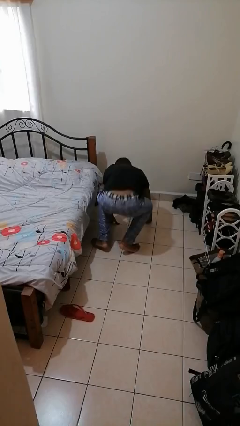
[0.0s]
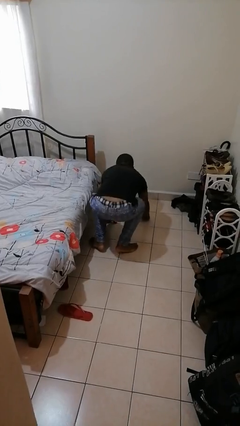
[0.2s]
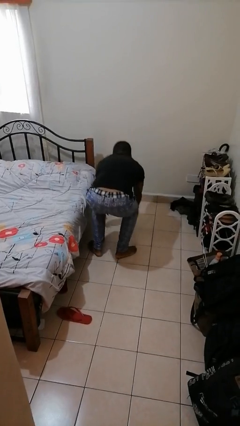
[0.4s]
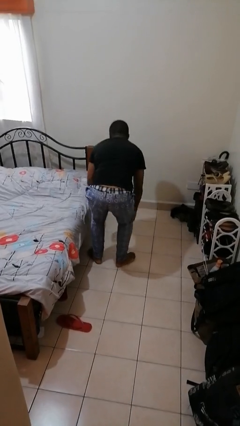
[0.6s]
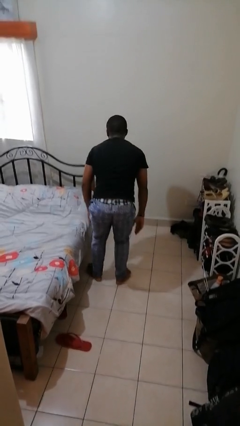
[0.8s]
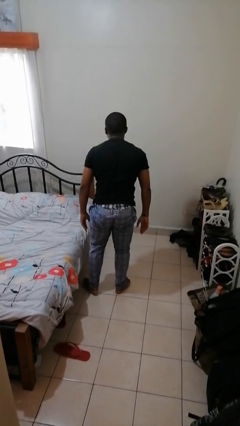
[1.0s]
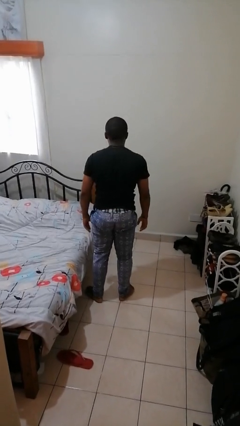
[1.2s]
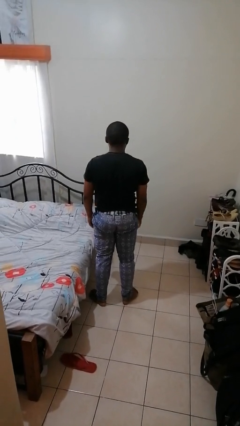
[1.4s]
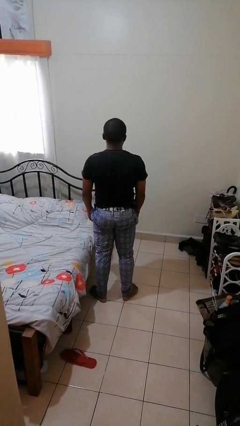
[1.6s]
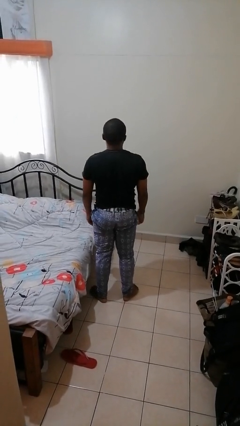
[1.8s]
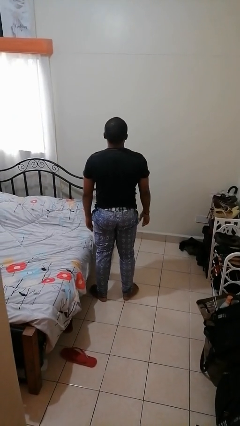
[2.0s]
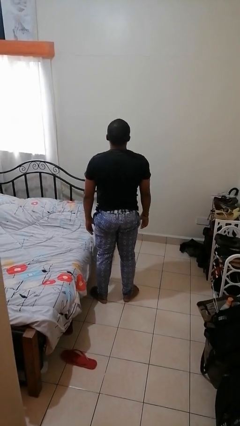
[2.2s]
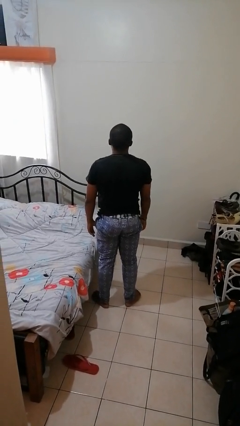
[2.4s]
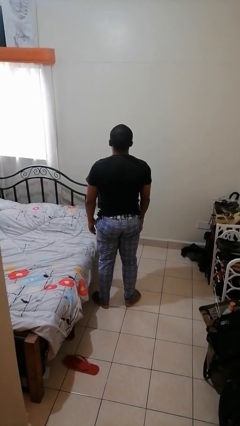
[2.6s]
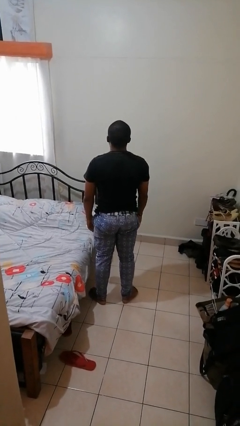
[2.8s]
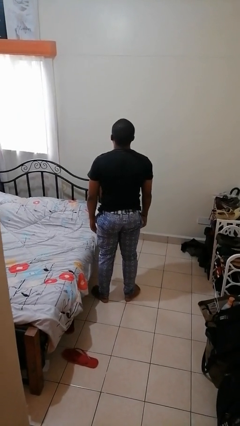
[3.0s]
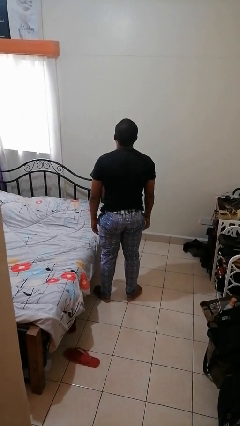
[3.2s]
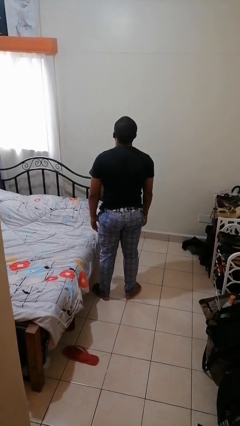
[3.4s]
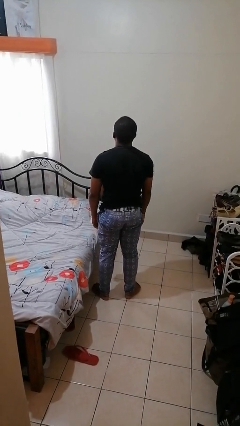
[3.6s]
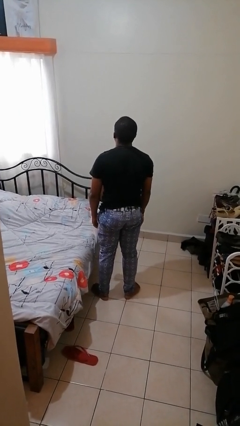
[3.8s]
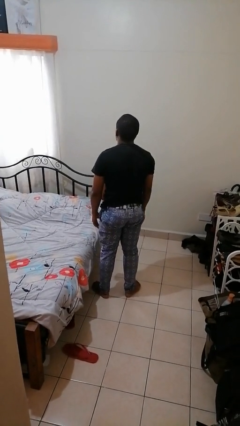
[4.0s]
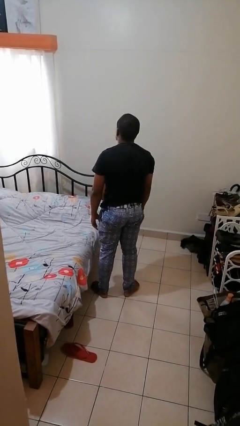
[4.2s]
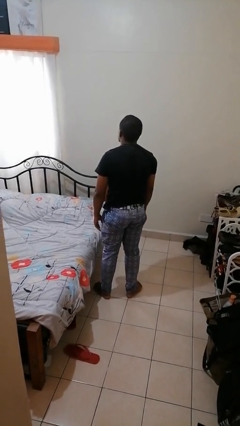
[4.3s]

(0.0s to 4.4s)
person stands up from floor

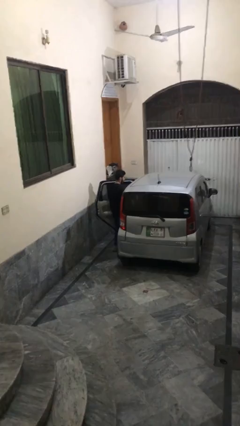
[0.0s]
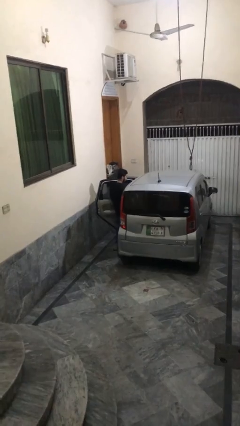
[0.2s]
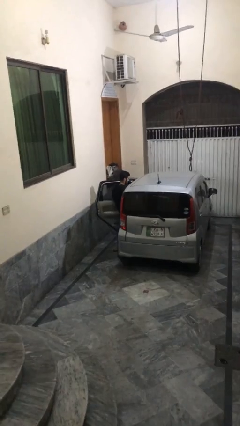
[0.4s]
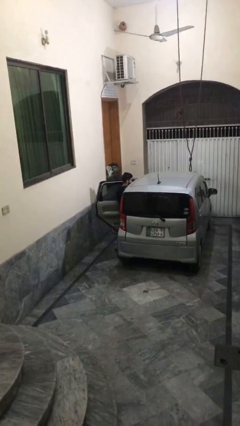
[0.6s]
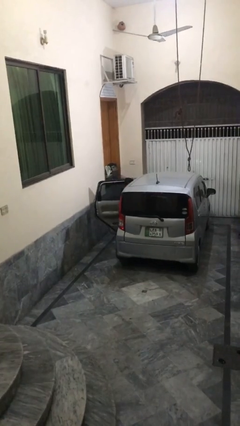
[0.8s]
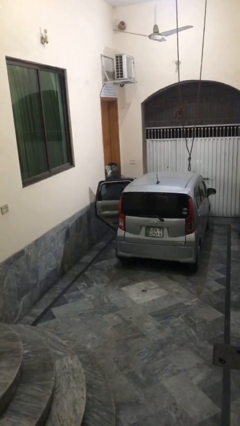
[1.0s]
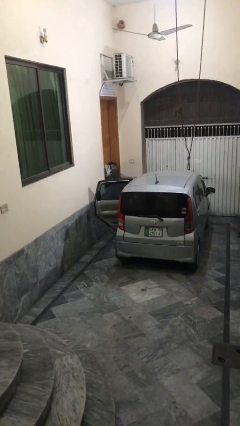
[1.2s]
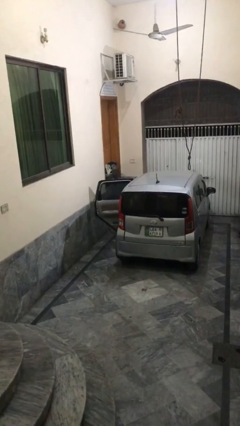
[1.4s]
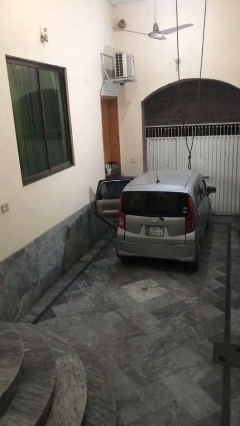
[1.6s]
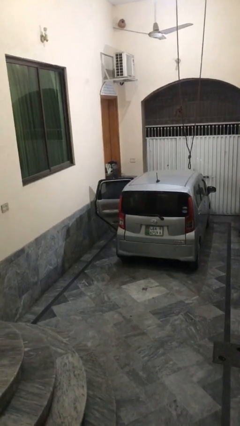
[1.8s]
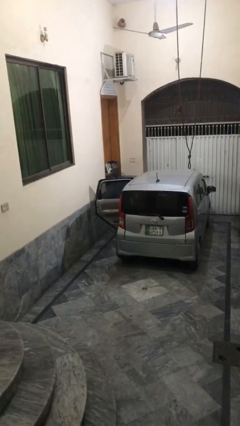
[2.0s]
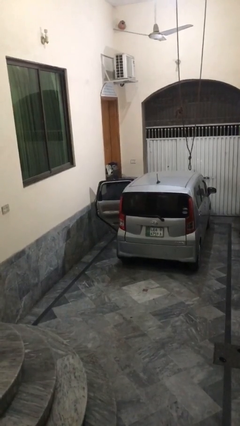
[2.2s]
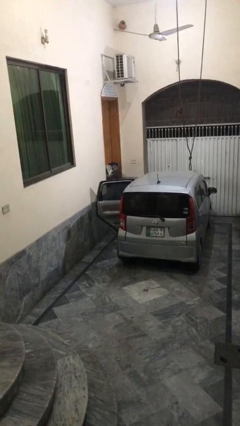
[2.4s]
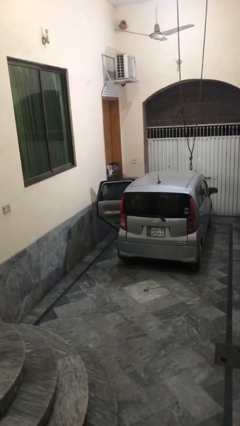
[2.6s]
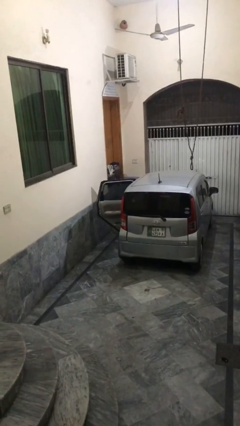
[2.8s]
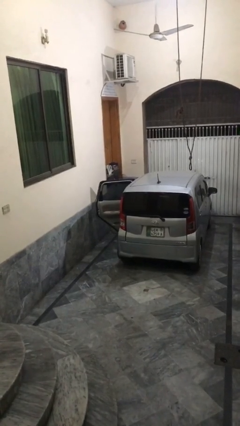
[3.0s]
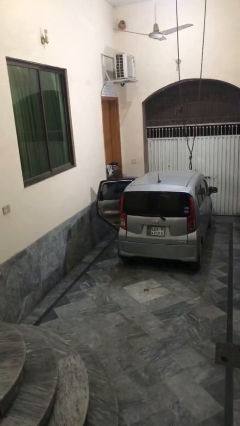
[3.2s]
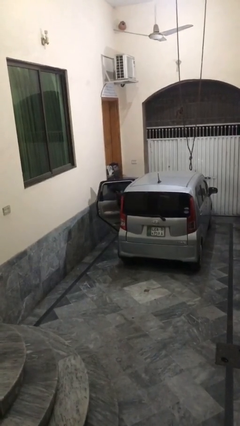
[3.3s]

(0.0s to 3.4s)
person enters car

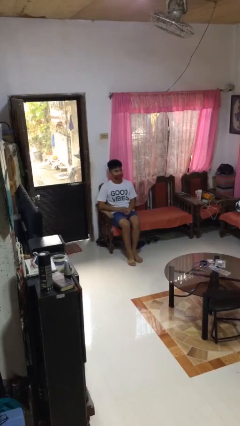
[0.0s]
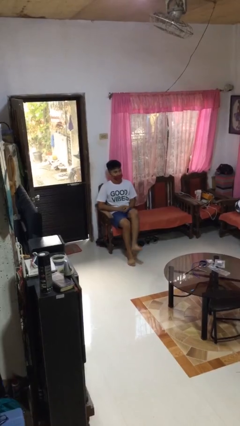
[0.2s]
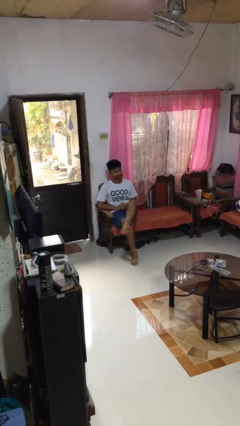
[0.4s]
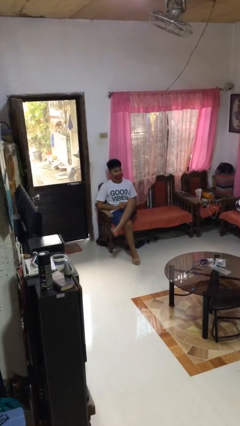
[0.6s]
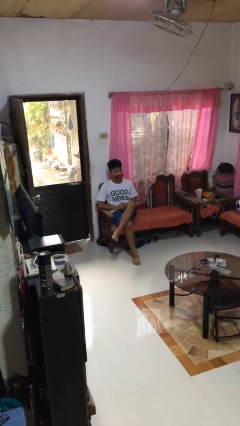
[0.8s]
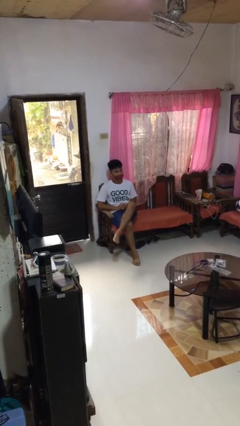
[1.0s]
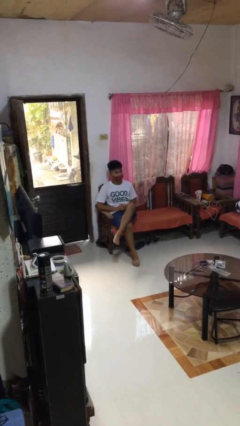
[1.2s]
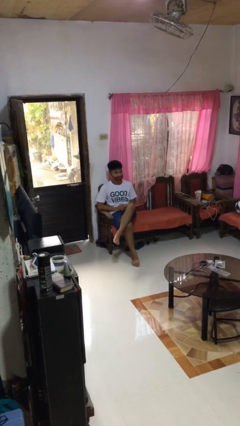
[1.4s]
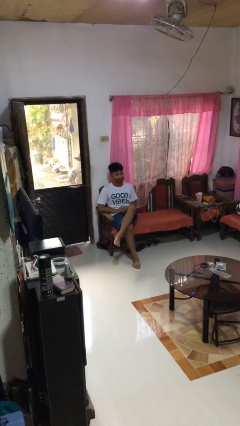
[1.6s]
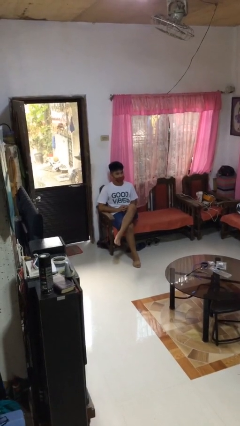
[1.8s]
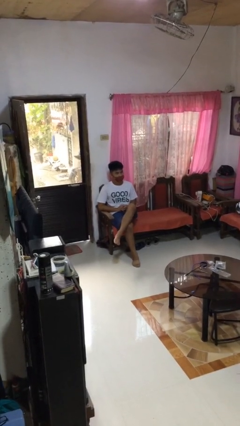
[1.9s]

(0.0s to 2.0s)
person crosses legs

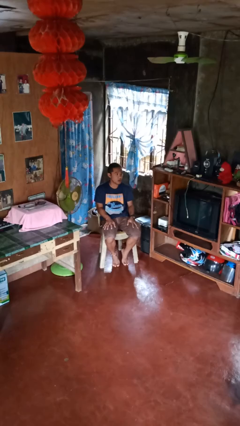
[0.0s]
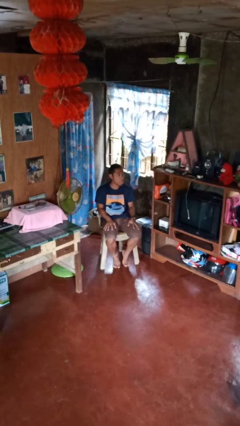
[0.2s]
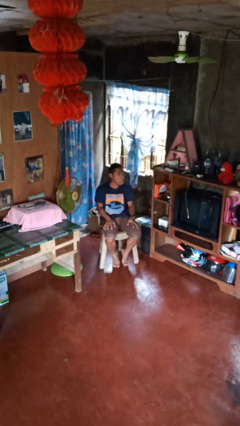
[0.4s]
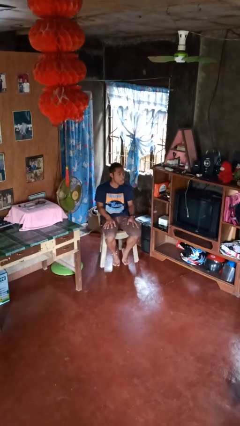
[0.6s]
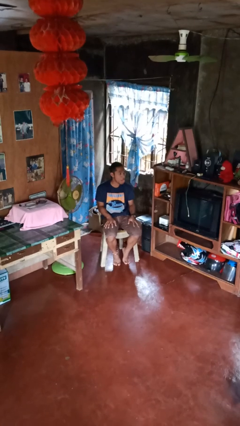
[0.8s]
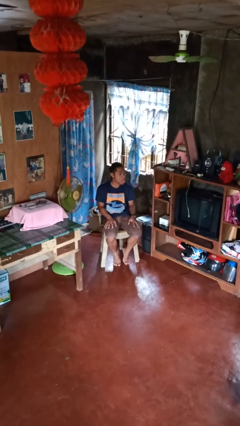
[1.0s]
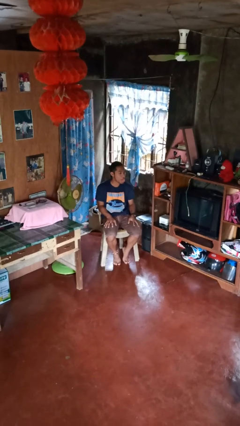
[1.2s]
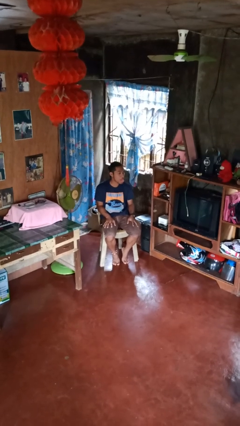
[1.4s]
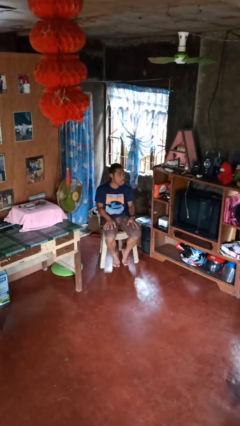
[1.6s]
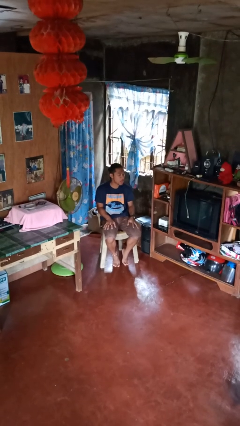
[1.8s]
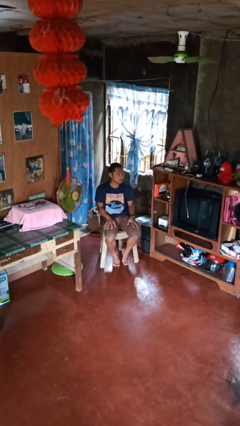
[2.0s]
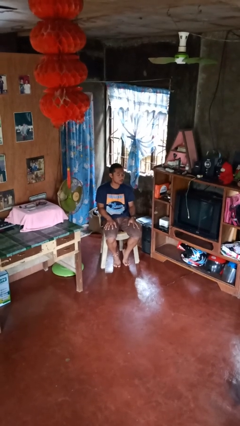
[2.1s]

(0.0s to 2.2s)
person sticks out tongue

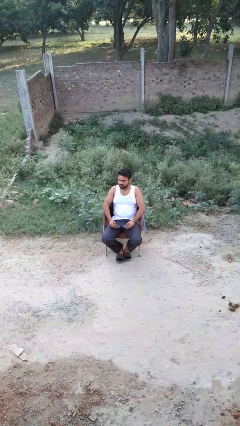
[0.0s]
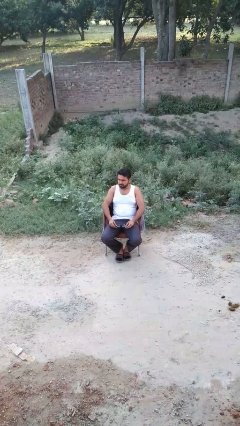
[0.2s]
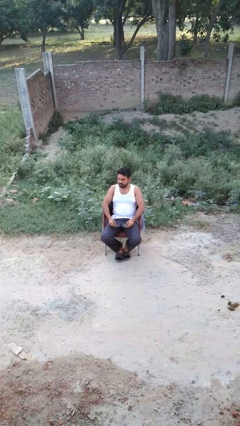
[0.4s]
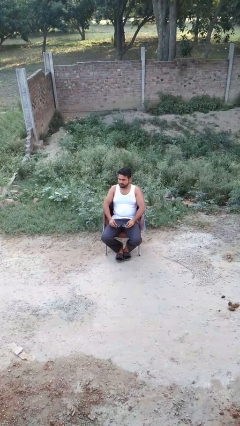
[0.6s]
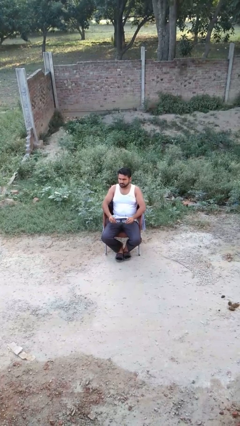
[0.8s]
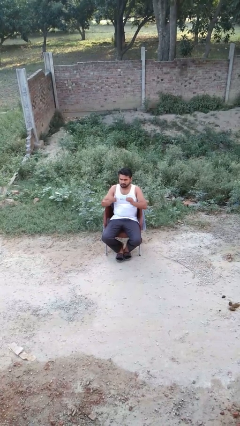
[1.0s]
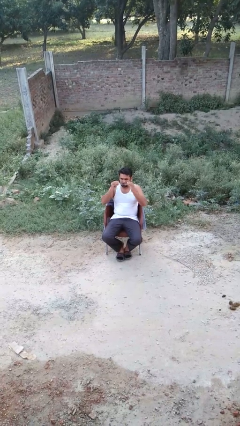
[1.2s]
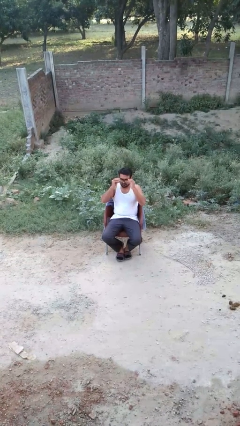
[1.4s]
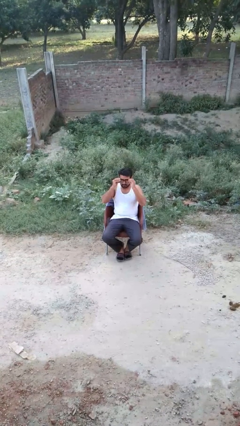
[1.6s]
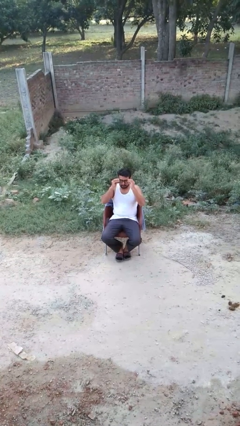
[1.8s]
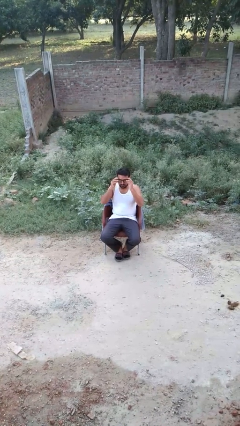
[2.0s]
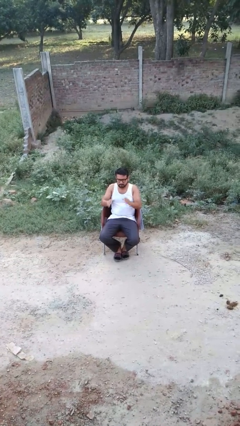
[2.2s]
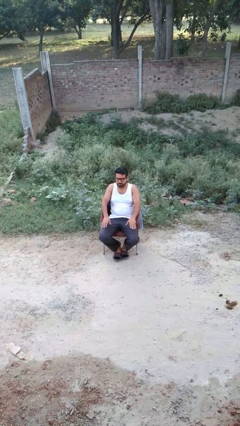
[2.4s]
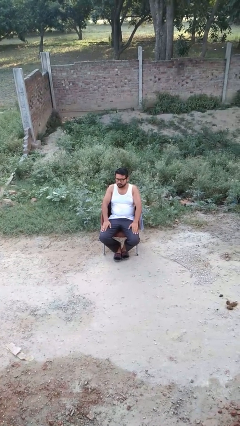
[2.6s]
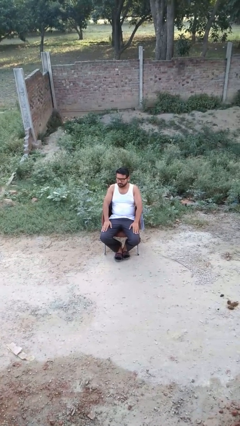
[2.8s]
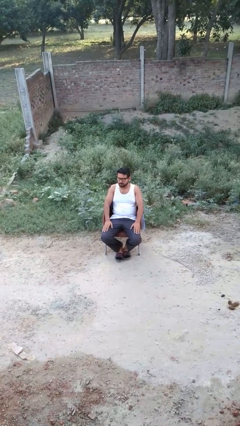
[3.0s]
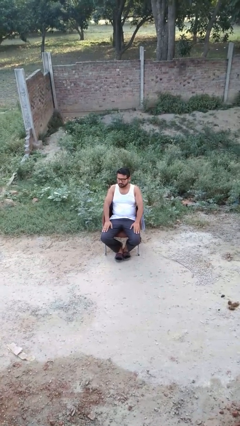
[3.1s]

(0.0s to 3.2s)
person puts on glasses

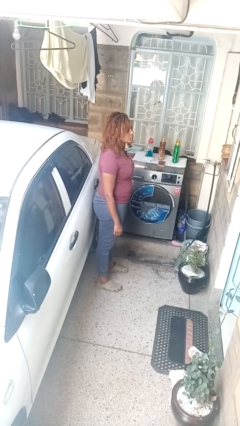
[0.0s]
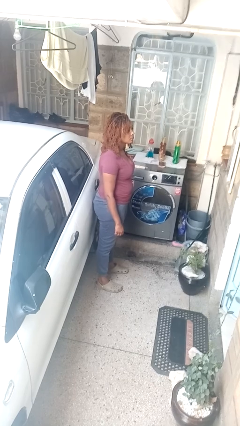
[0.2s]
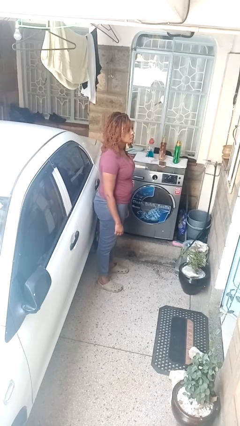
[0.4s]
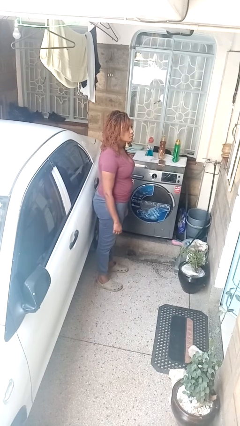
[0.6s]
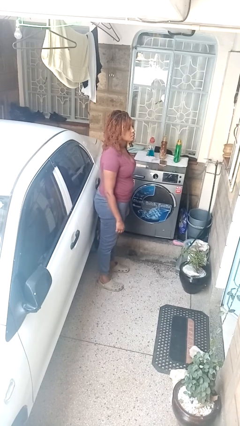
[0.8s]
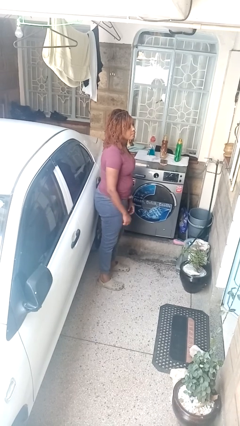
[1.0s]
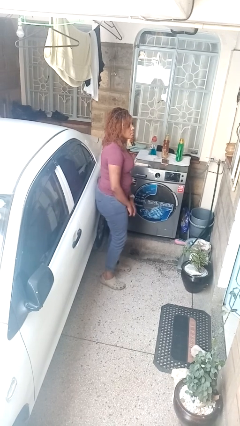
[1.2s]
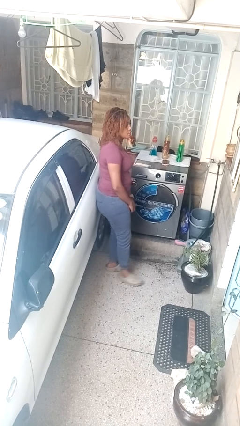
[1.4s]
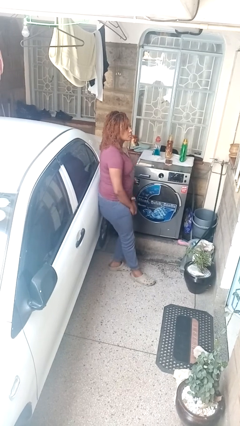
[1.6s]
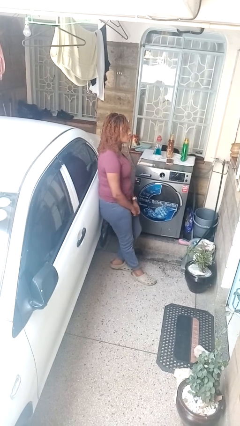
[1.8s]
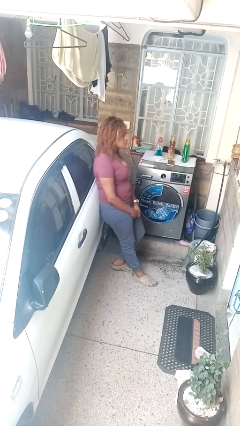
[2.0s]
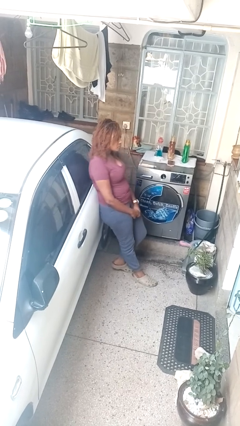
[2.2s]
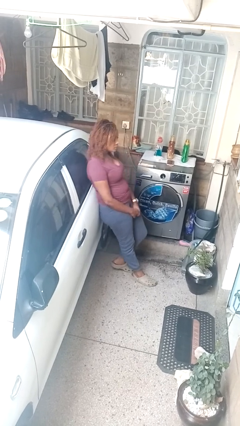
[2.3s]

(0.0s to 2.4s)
person leans against car

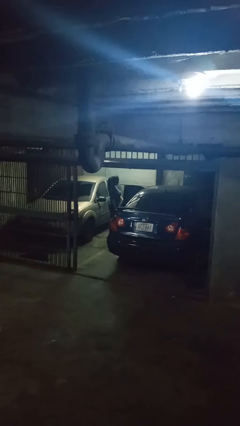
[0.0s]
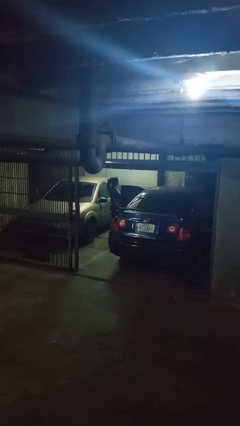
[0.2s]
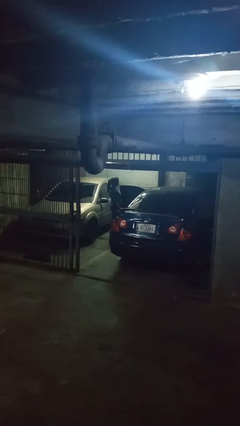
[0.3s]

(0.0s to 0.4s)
person opens car door
